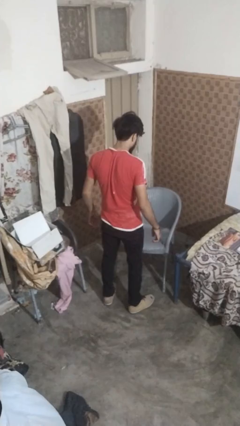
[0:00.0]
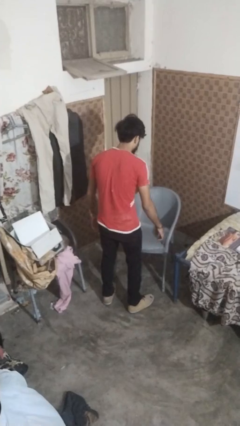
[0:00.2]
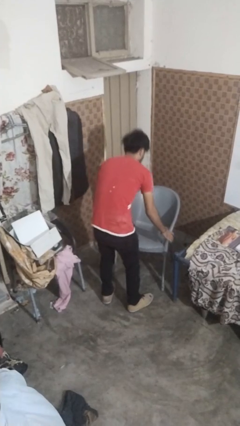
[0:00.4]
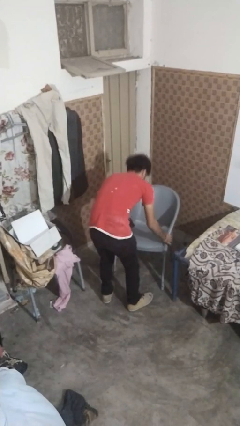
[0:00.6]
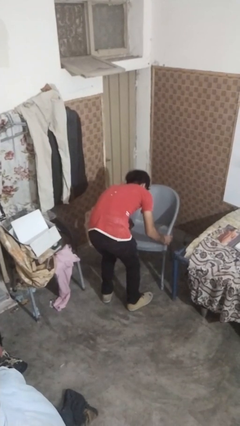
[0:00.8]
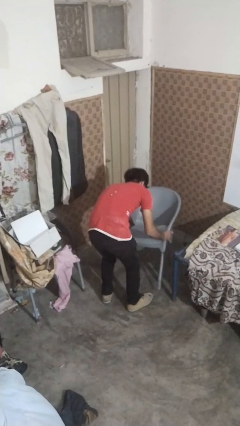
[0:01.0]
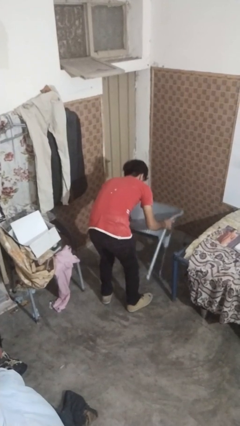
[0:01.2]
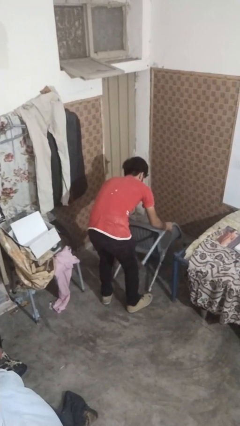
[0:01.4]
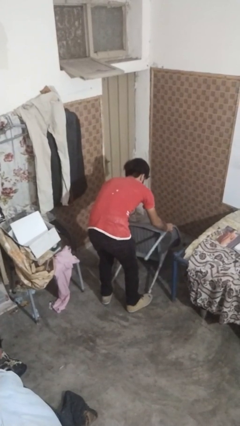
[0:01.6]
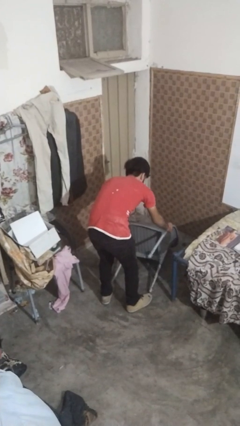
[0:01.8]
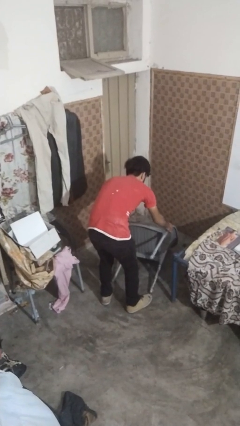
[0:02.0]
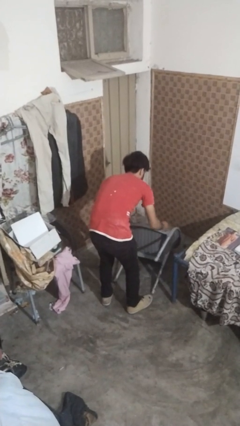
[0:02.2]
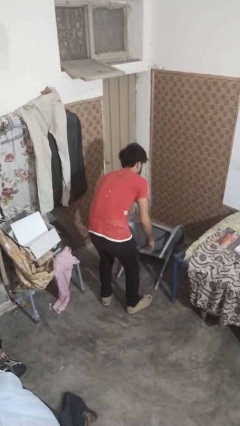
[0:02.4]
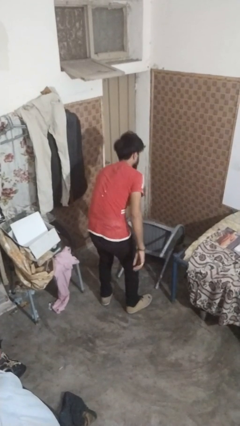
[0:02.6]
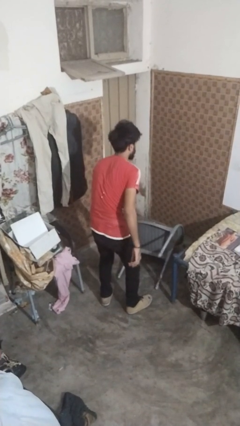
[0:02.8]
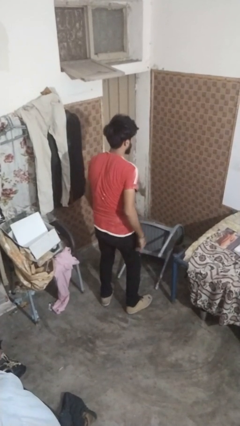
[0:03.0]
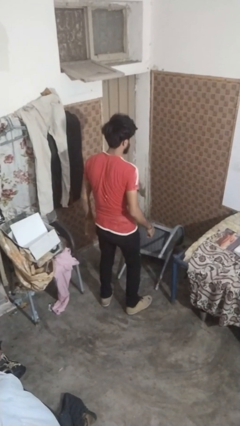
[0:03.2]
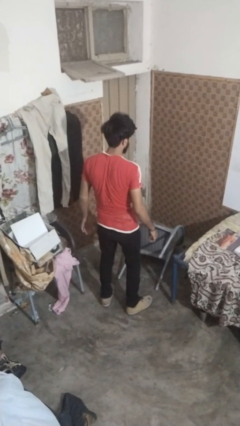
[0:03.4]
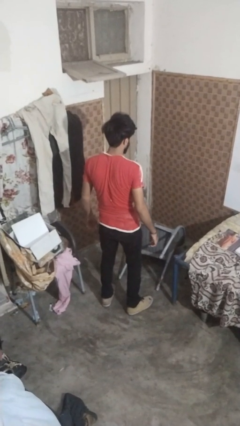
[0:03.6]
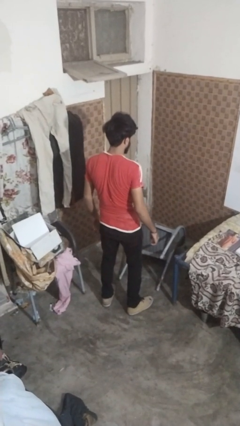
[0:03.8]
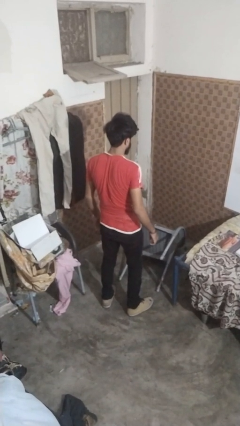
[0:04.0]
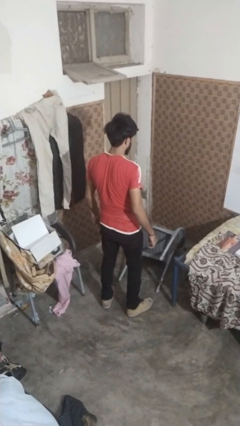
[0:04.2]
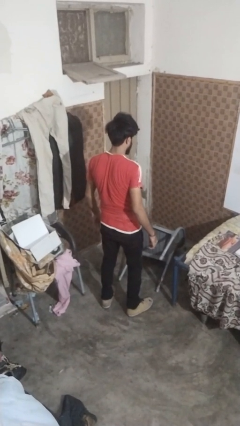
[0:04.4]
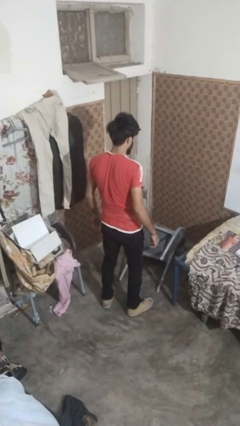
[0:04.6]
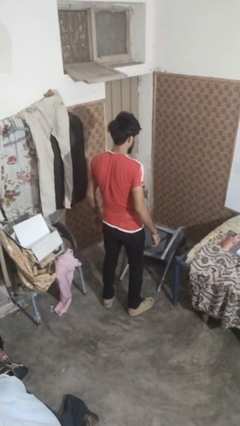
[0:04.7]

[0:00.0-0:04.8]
person knocks over furniture

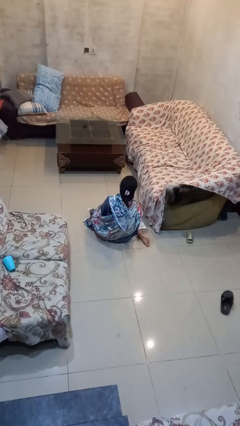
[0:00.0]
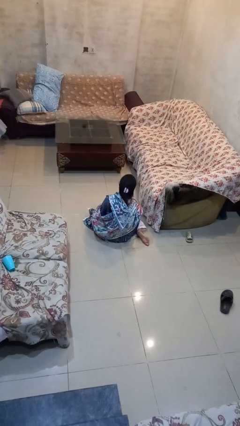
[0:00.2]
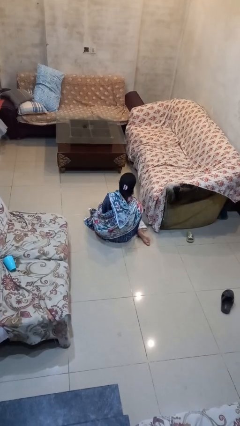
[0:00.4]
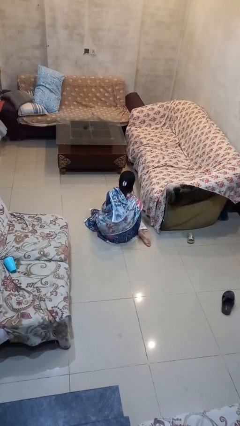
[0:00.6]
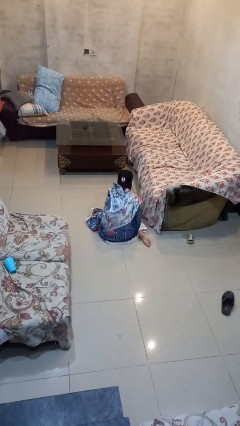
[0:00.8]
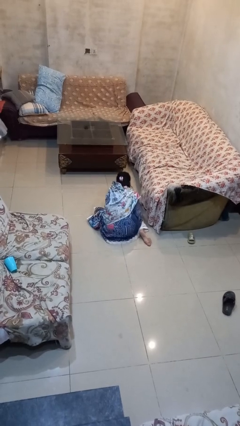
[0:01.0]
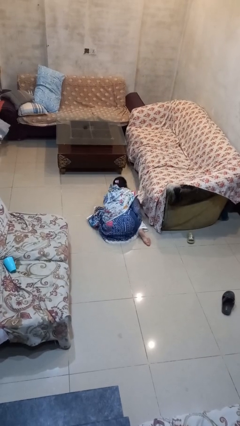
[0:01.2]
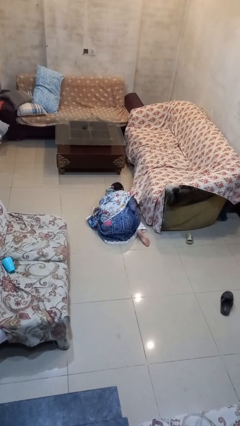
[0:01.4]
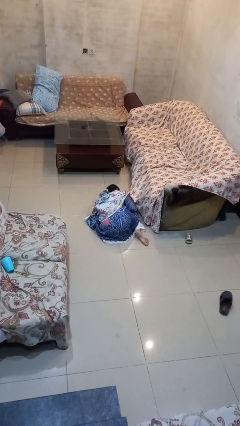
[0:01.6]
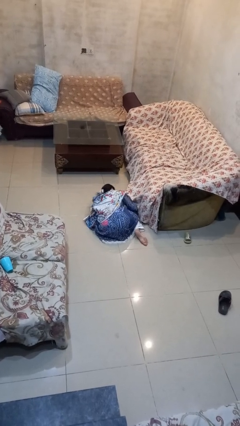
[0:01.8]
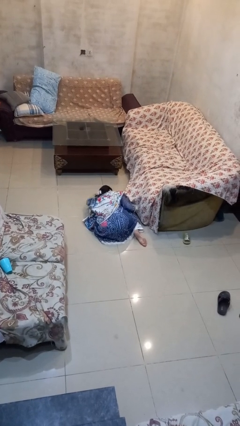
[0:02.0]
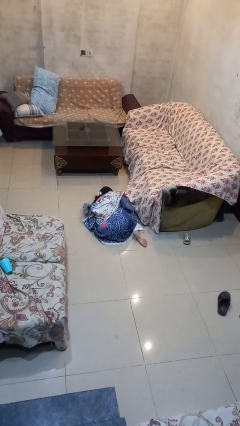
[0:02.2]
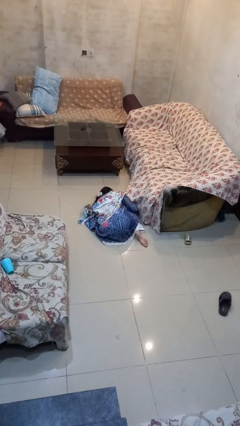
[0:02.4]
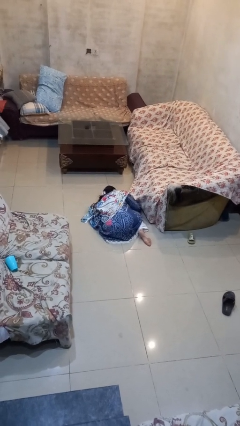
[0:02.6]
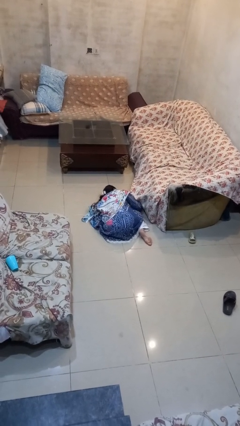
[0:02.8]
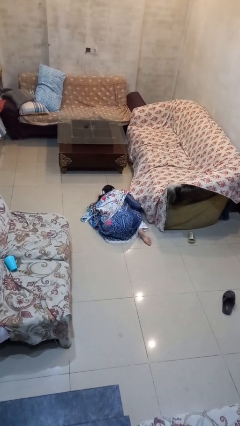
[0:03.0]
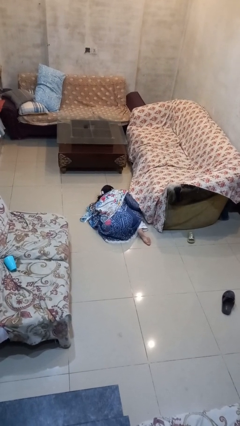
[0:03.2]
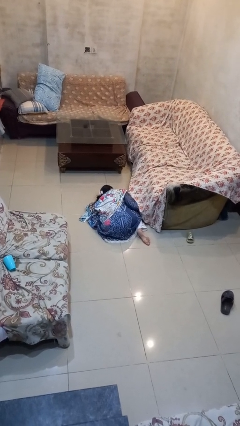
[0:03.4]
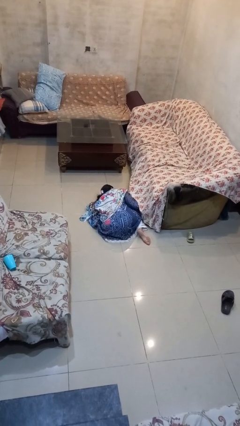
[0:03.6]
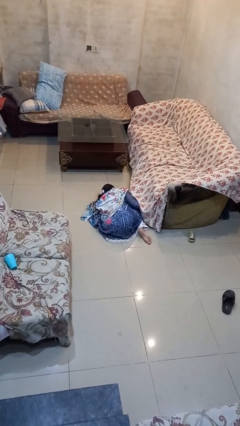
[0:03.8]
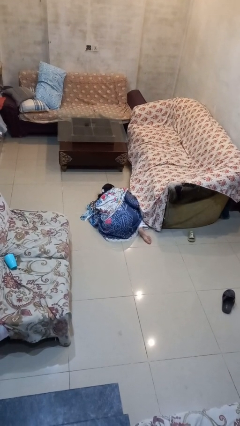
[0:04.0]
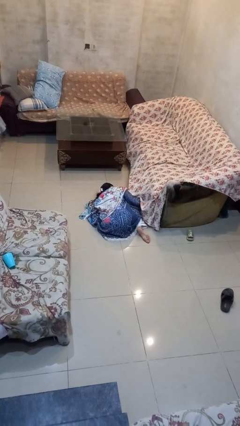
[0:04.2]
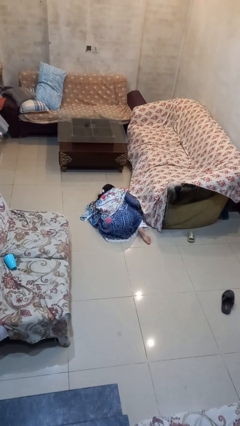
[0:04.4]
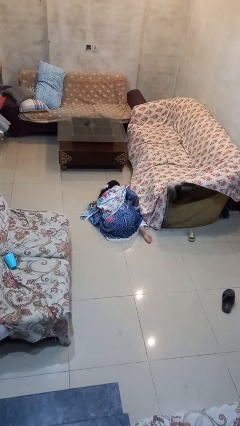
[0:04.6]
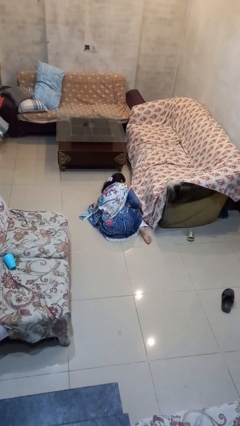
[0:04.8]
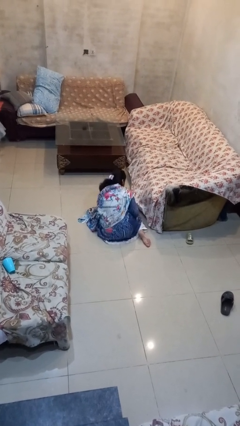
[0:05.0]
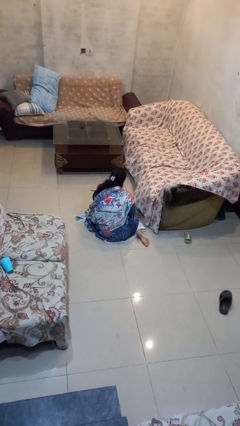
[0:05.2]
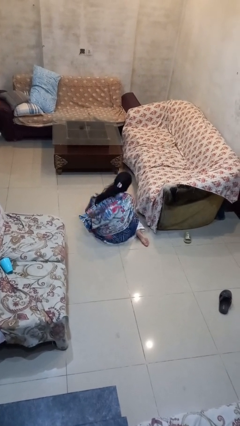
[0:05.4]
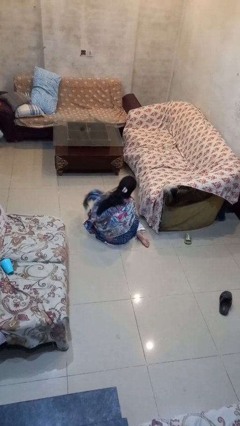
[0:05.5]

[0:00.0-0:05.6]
person searches under couch

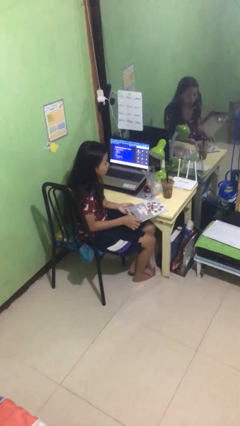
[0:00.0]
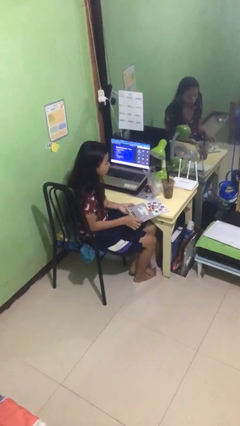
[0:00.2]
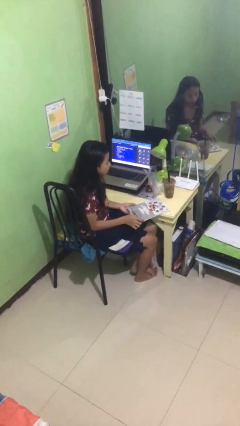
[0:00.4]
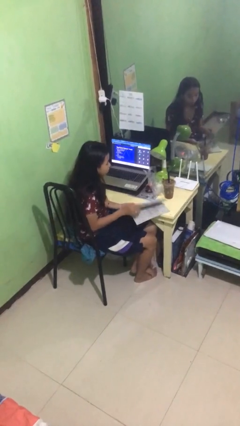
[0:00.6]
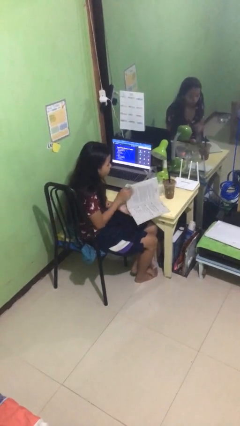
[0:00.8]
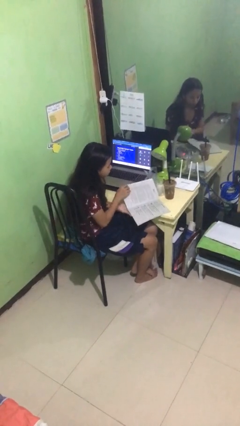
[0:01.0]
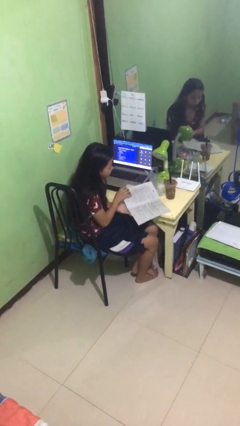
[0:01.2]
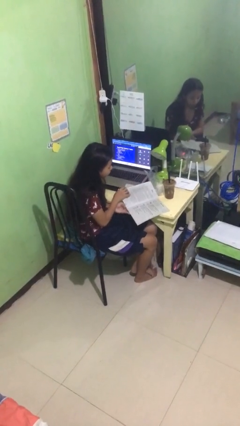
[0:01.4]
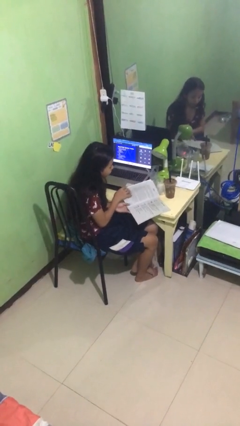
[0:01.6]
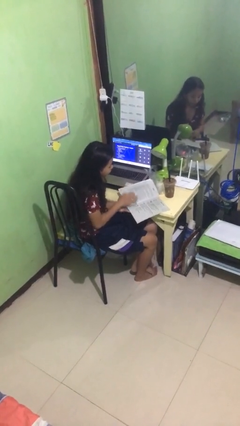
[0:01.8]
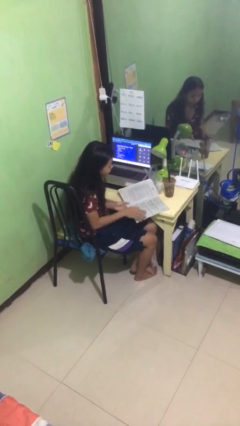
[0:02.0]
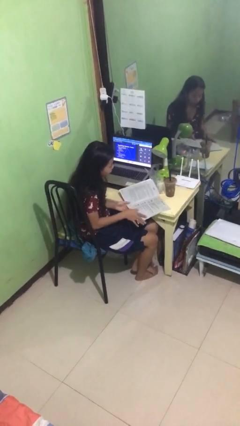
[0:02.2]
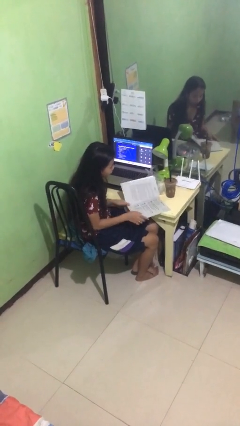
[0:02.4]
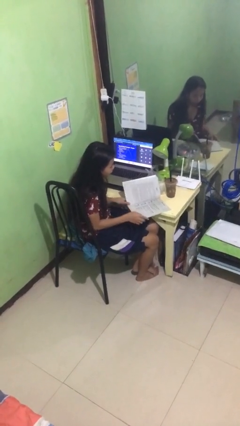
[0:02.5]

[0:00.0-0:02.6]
person reads document

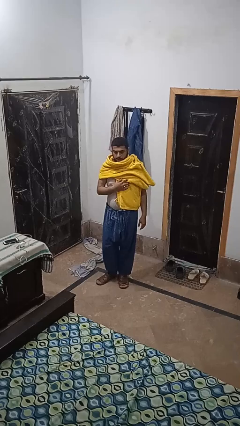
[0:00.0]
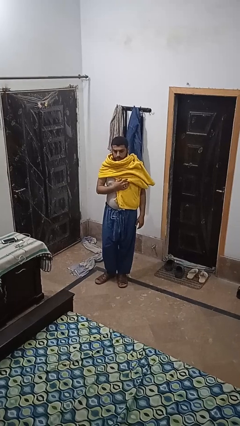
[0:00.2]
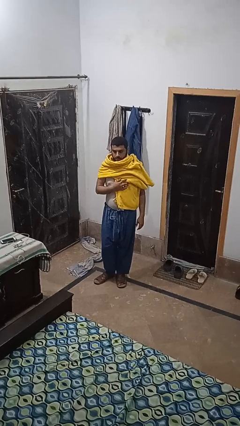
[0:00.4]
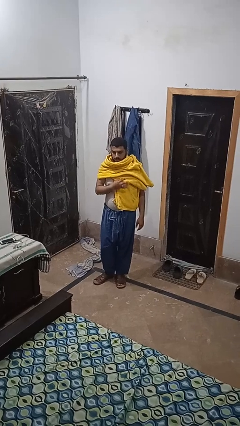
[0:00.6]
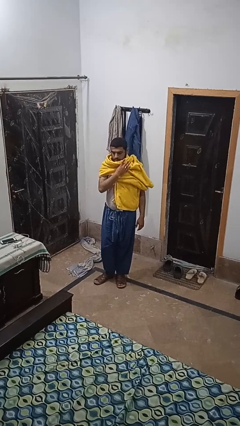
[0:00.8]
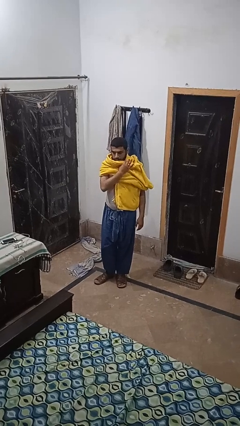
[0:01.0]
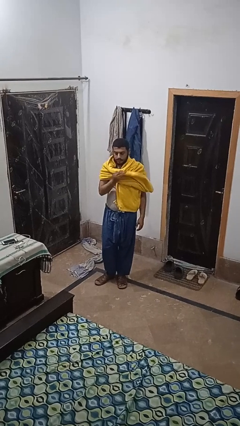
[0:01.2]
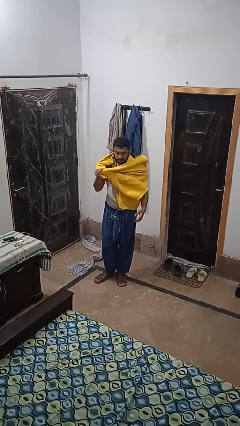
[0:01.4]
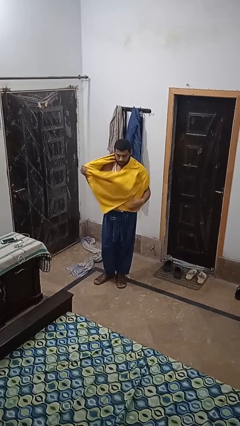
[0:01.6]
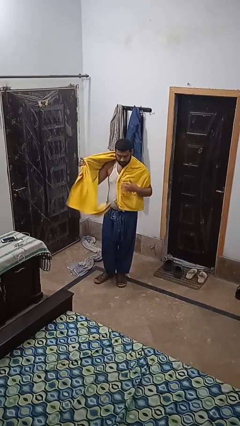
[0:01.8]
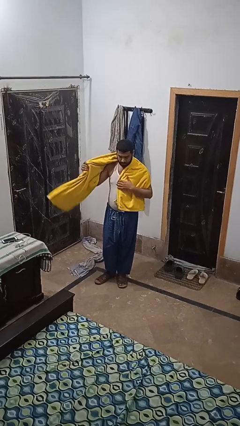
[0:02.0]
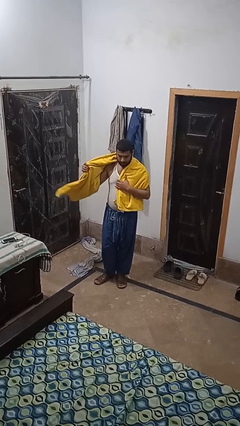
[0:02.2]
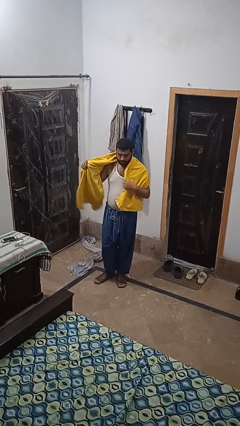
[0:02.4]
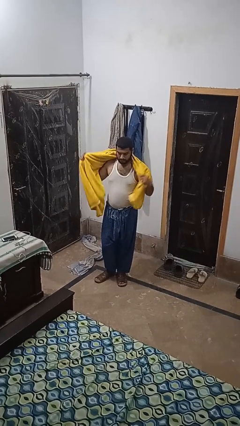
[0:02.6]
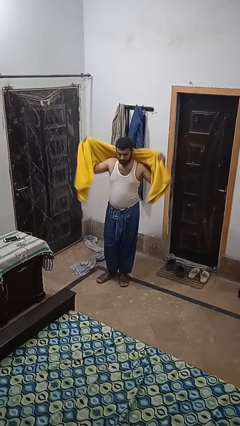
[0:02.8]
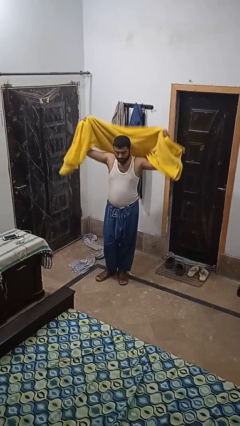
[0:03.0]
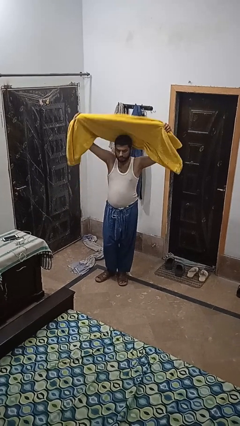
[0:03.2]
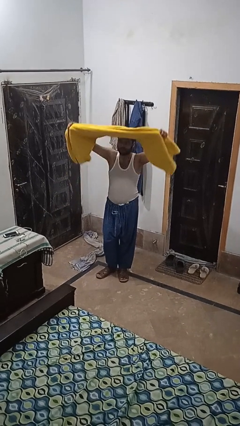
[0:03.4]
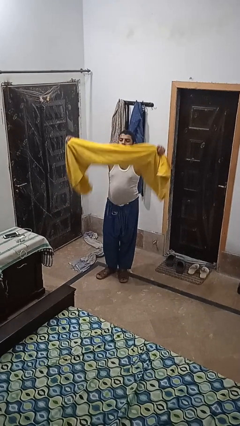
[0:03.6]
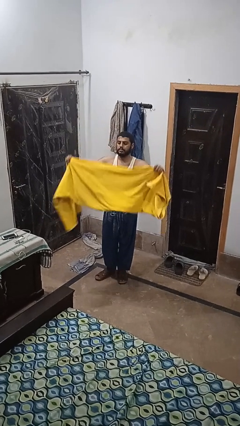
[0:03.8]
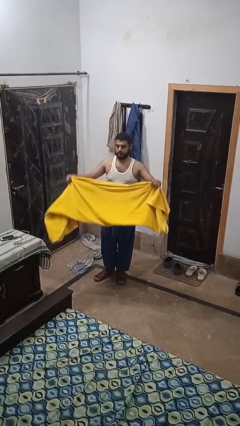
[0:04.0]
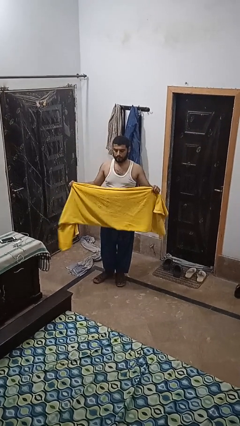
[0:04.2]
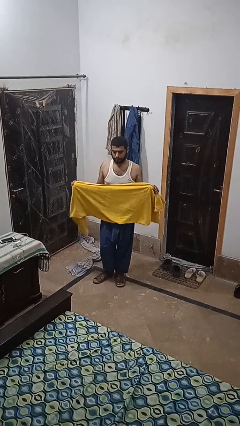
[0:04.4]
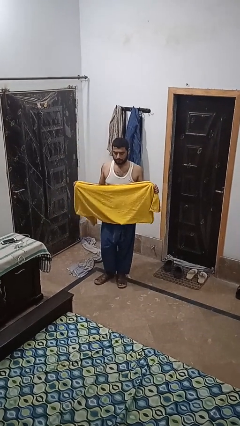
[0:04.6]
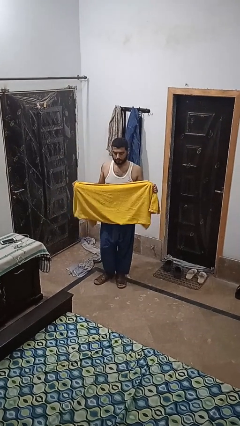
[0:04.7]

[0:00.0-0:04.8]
person takes off scarf
